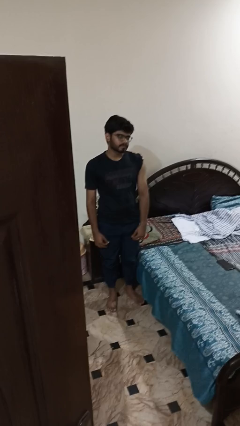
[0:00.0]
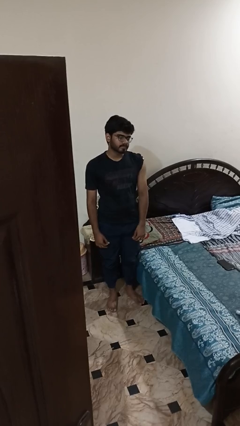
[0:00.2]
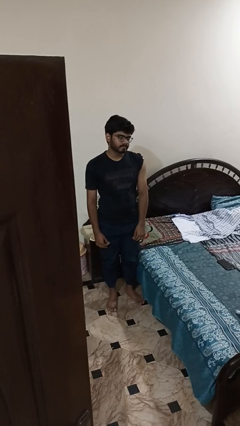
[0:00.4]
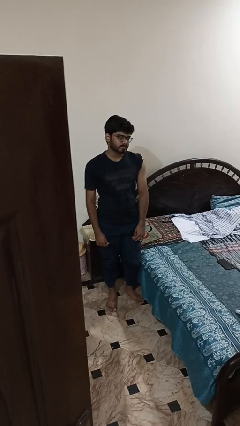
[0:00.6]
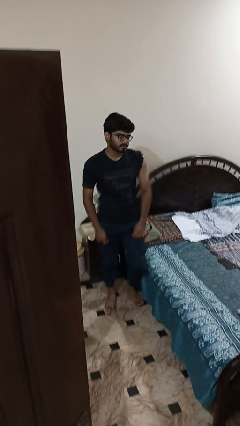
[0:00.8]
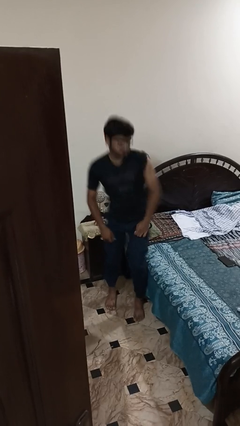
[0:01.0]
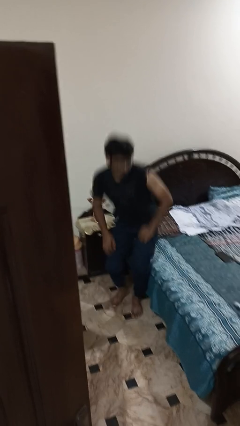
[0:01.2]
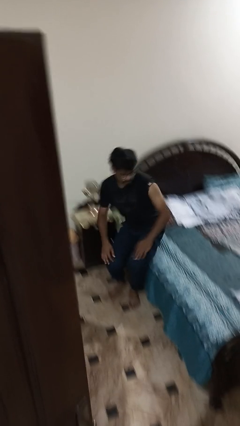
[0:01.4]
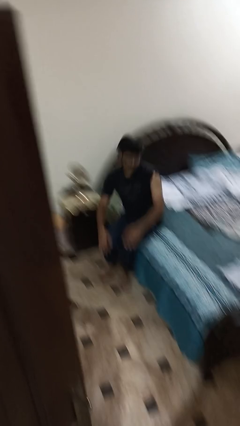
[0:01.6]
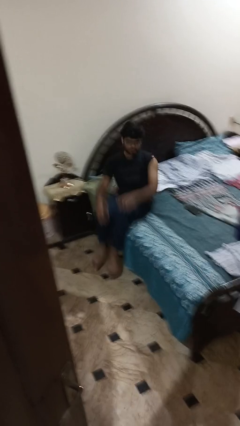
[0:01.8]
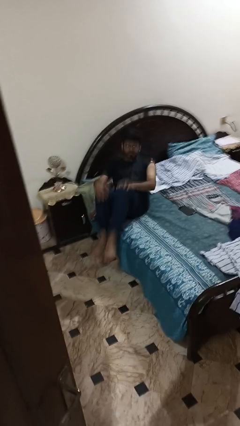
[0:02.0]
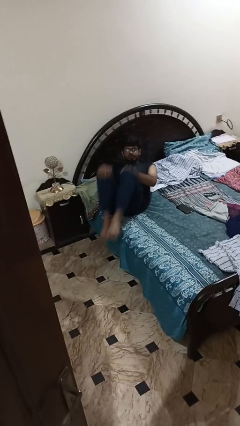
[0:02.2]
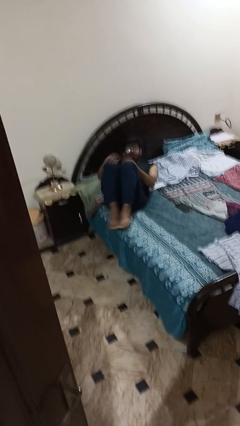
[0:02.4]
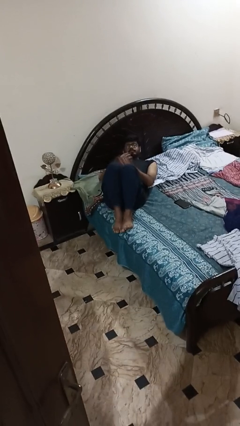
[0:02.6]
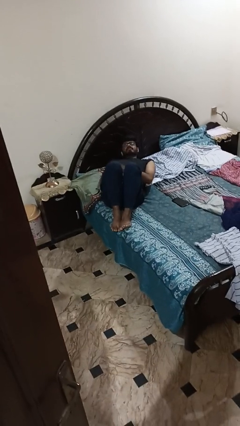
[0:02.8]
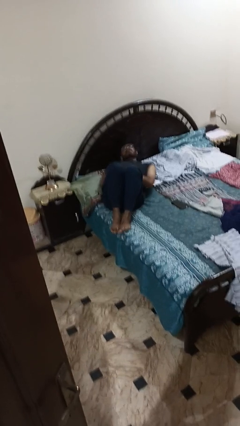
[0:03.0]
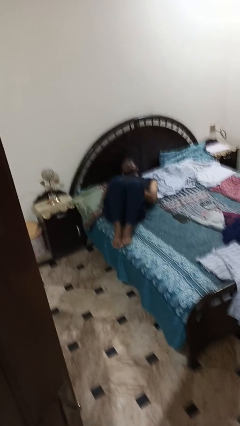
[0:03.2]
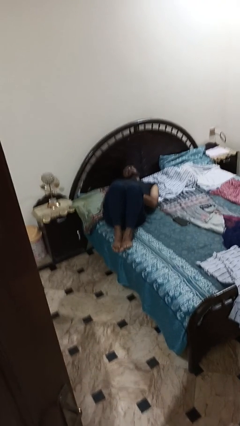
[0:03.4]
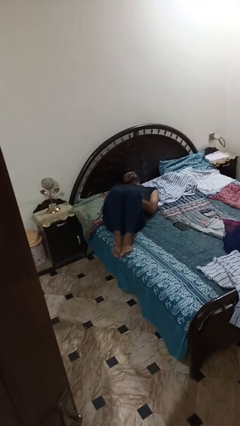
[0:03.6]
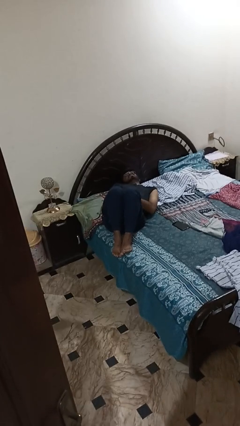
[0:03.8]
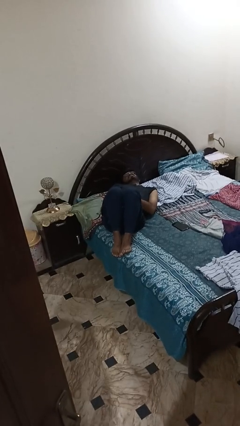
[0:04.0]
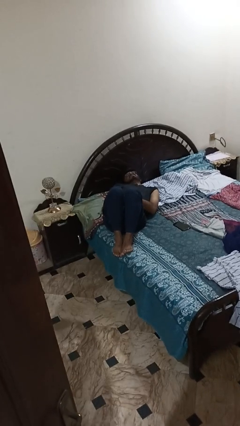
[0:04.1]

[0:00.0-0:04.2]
person lies down on bed

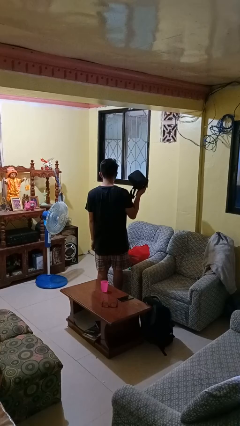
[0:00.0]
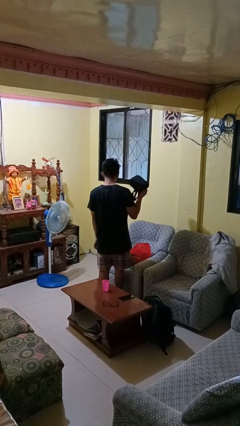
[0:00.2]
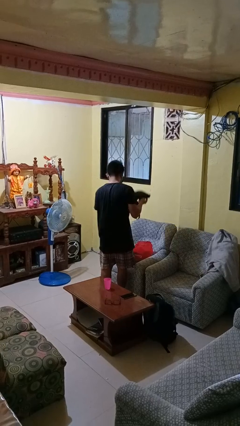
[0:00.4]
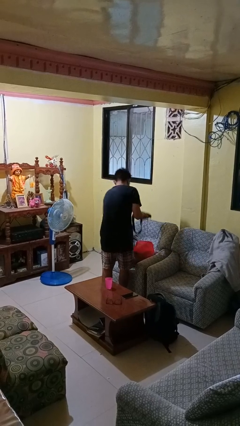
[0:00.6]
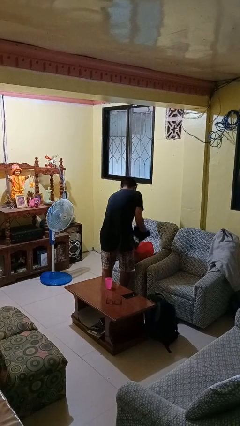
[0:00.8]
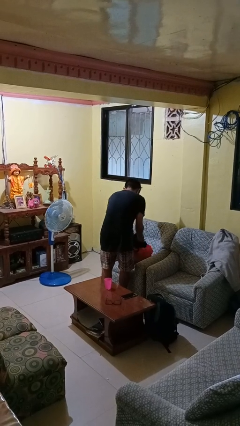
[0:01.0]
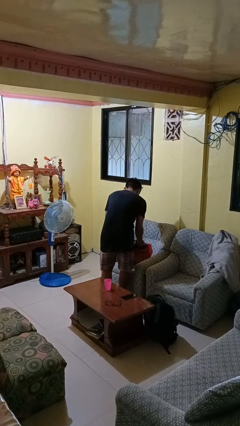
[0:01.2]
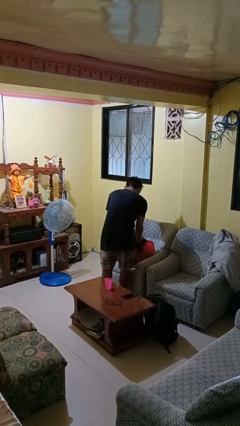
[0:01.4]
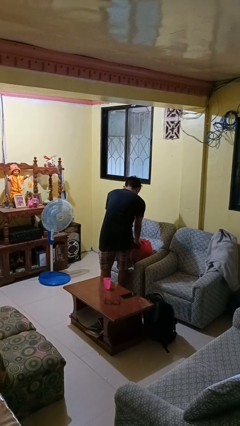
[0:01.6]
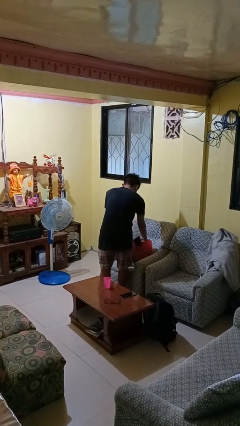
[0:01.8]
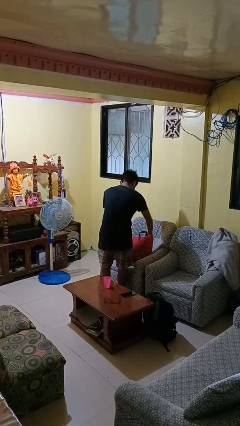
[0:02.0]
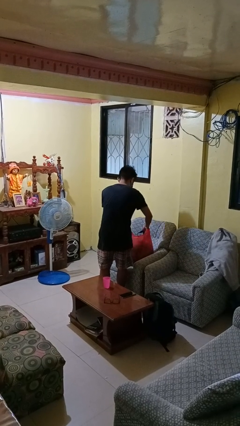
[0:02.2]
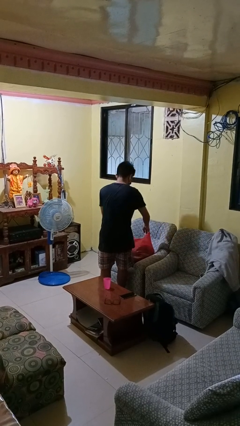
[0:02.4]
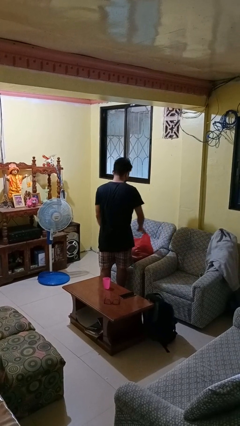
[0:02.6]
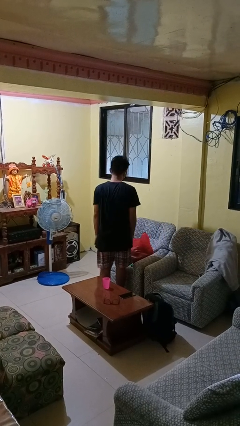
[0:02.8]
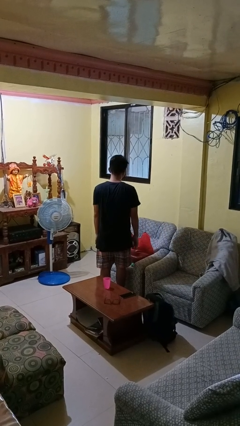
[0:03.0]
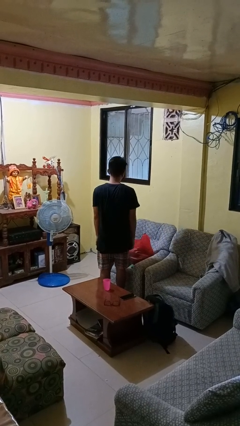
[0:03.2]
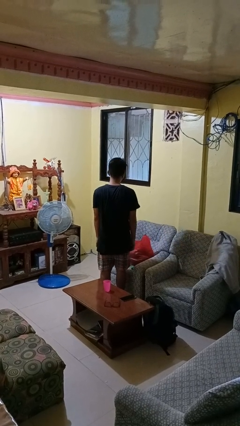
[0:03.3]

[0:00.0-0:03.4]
person puts object into bag

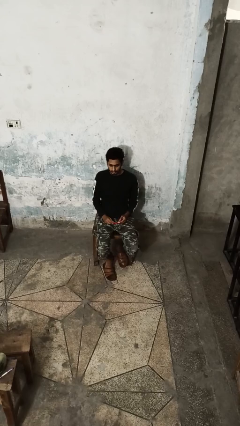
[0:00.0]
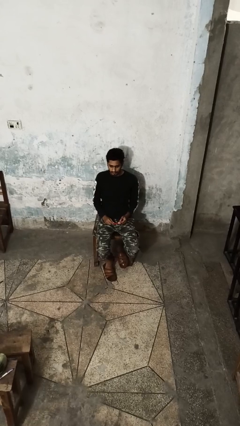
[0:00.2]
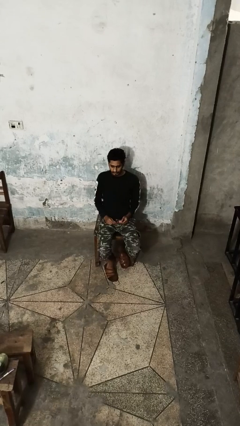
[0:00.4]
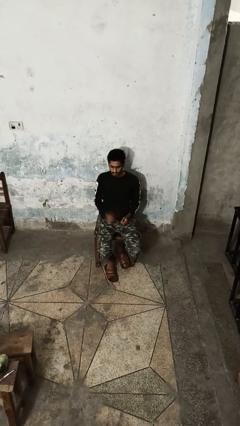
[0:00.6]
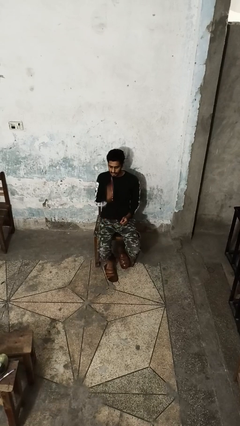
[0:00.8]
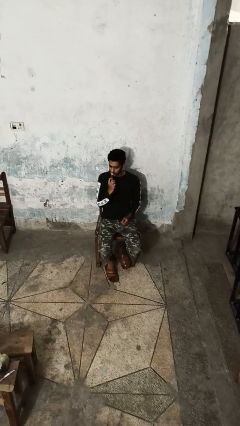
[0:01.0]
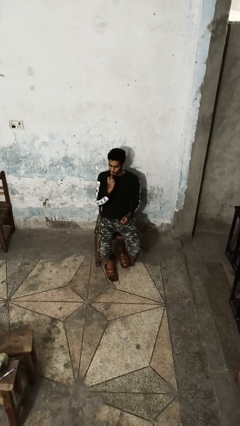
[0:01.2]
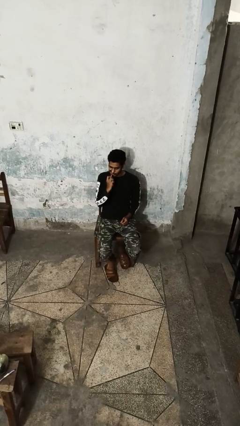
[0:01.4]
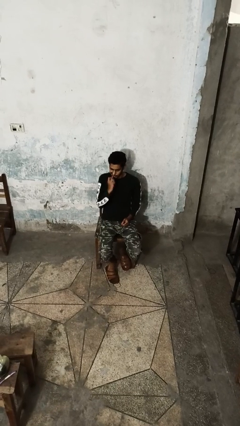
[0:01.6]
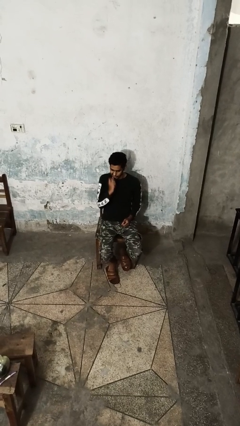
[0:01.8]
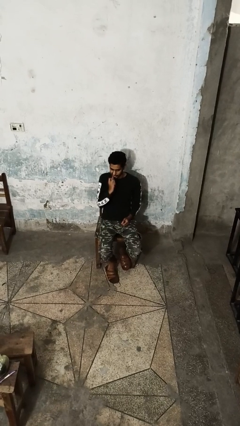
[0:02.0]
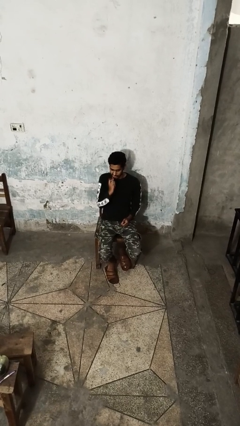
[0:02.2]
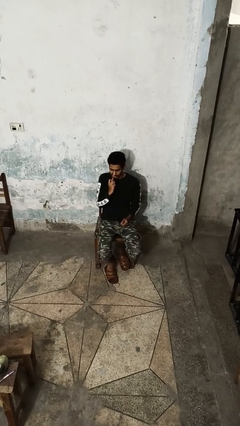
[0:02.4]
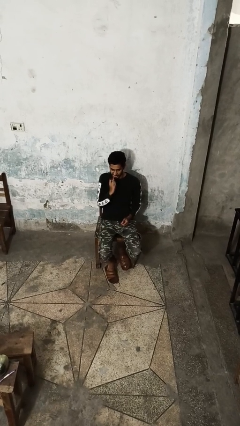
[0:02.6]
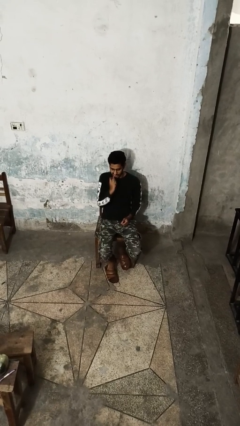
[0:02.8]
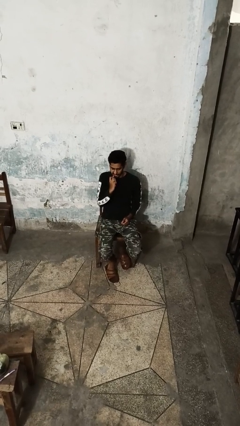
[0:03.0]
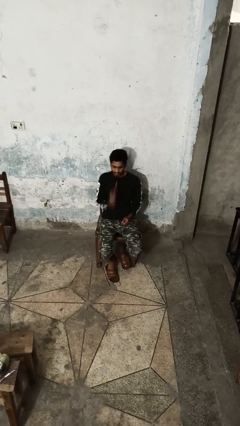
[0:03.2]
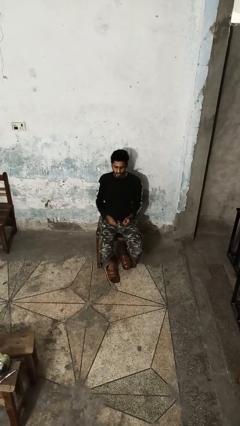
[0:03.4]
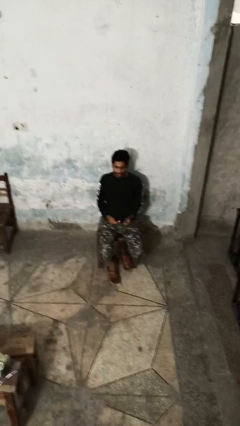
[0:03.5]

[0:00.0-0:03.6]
person brushes teeth

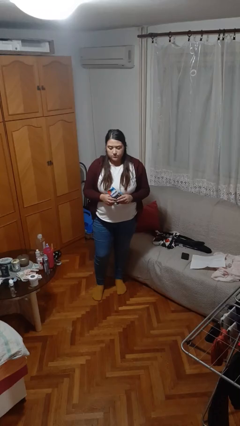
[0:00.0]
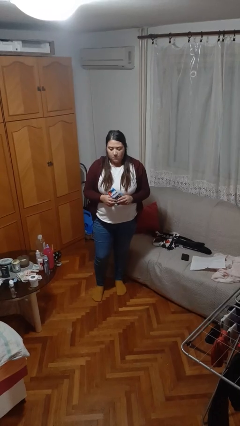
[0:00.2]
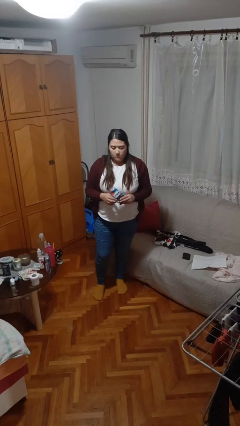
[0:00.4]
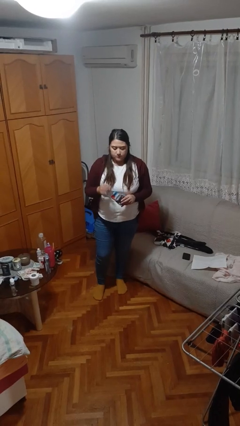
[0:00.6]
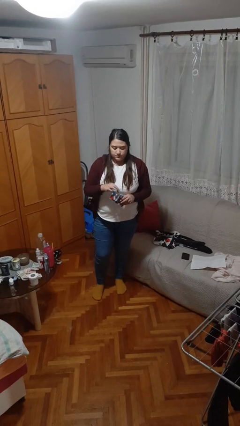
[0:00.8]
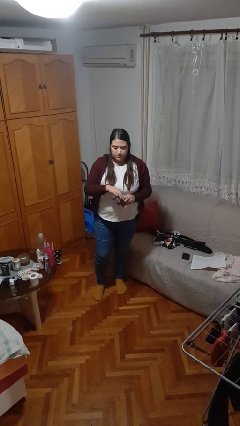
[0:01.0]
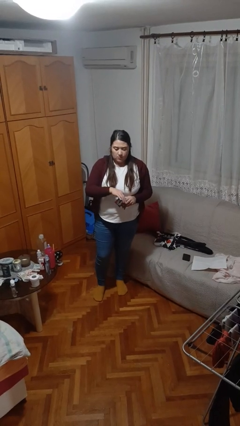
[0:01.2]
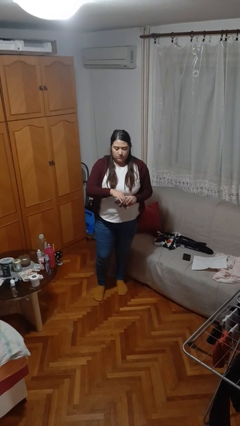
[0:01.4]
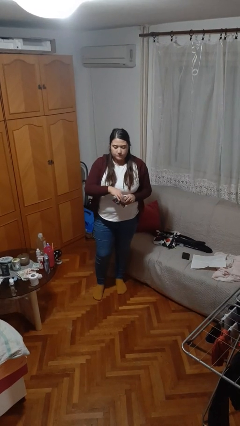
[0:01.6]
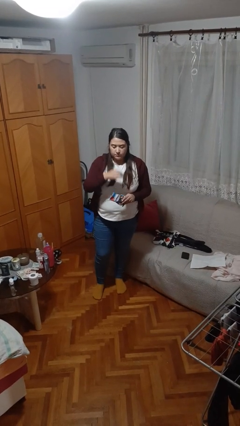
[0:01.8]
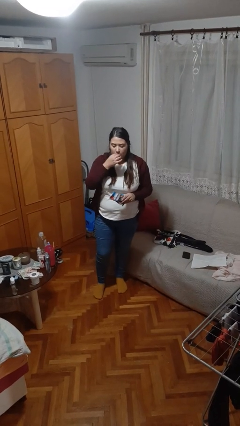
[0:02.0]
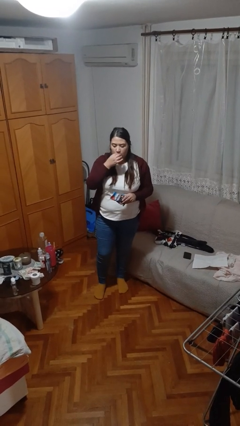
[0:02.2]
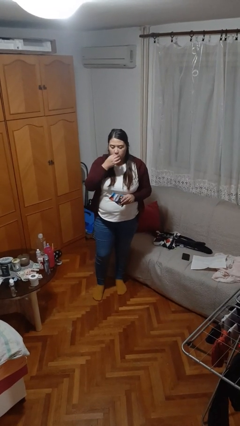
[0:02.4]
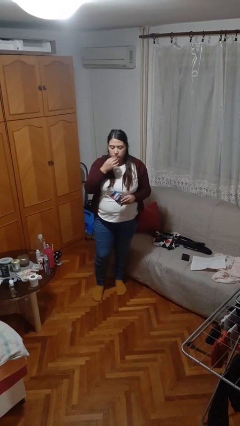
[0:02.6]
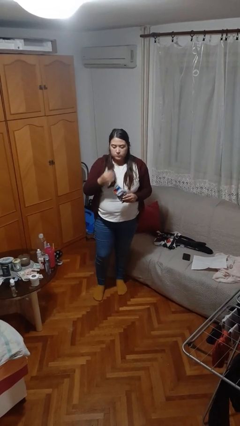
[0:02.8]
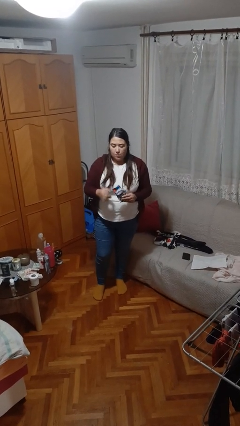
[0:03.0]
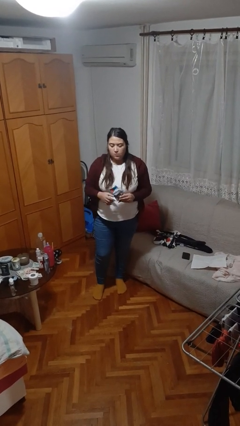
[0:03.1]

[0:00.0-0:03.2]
person eats snack from bag

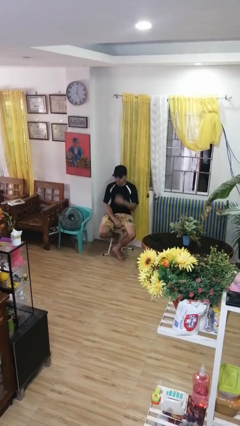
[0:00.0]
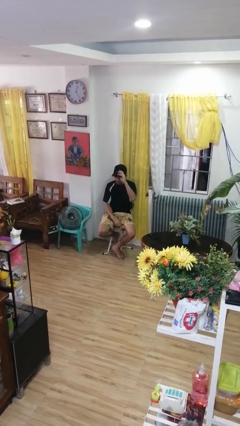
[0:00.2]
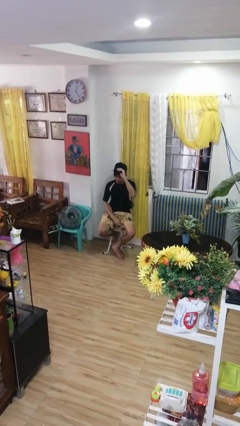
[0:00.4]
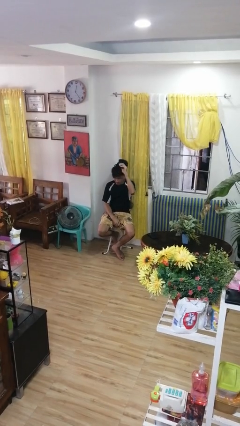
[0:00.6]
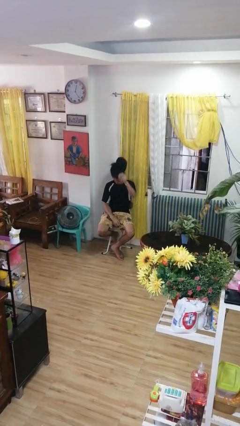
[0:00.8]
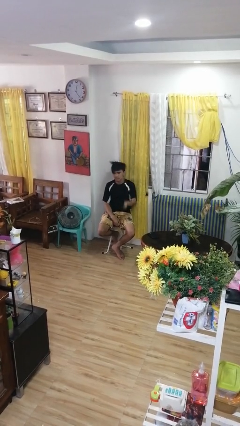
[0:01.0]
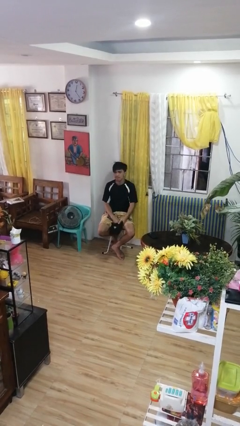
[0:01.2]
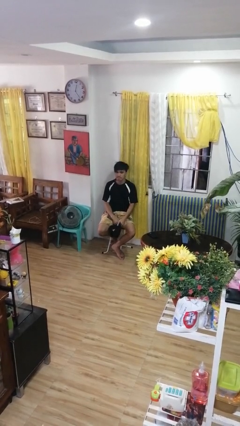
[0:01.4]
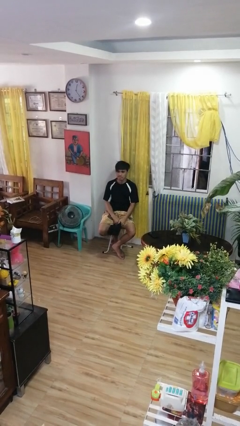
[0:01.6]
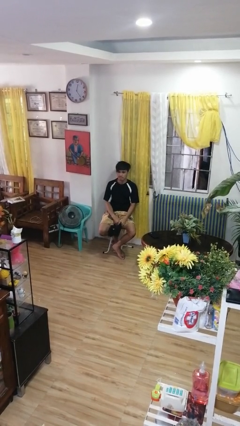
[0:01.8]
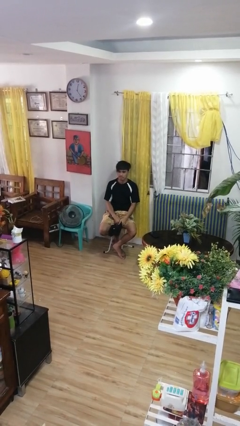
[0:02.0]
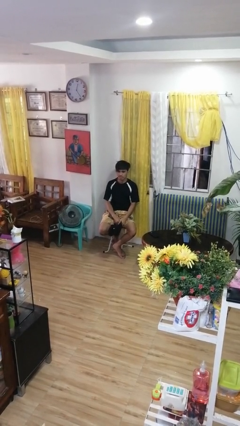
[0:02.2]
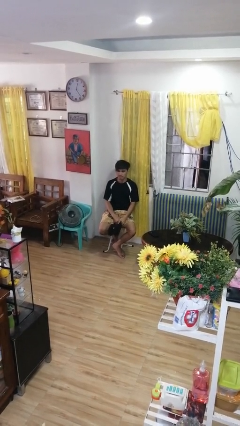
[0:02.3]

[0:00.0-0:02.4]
person takes off hat

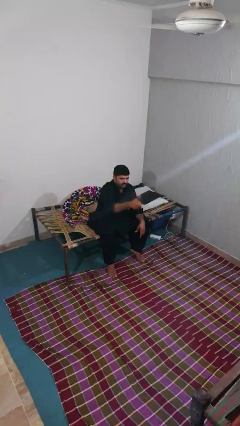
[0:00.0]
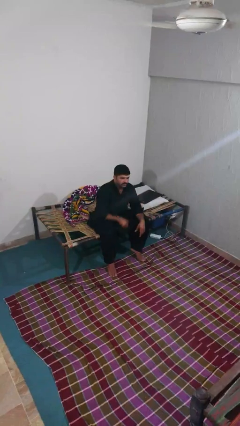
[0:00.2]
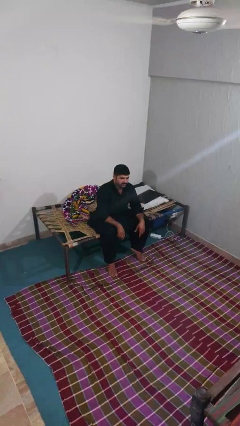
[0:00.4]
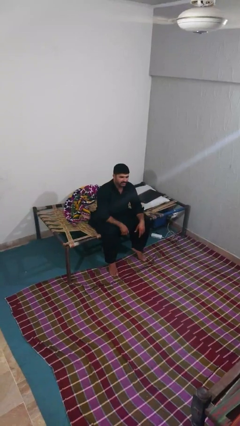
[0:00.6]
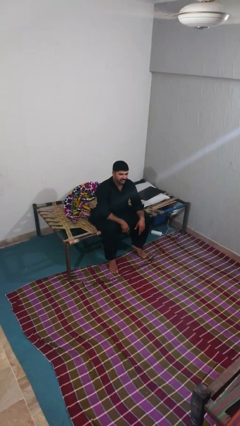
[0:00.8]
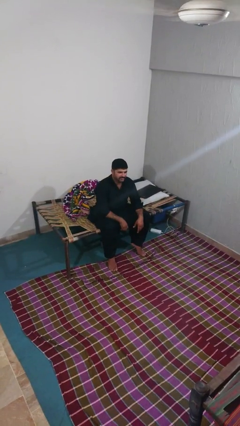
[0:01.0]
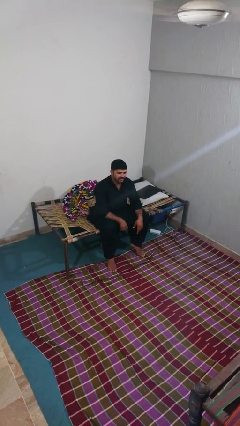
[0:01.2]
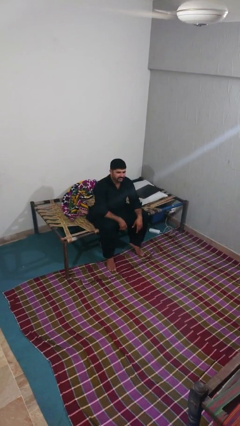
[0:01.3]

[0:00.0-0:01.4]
person gestures thumbs up
